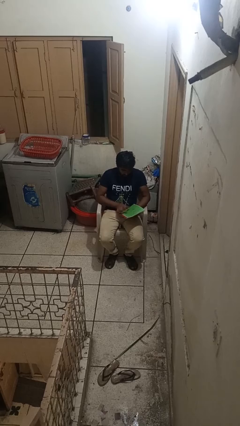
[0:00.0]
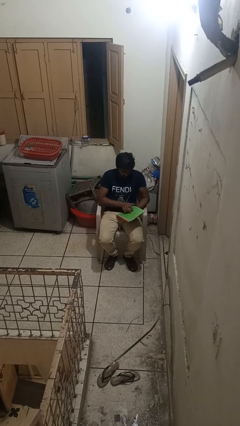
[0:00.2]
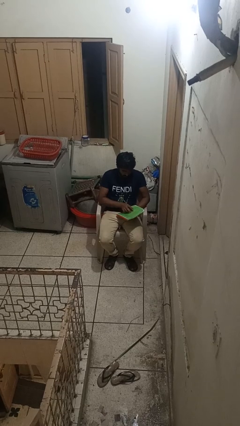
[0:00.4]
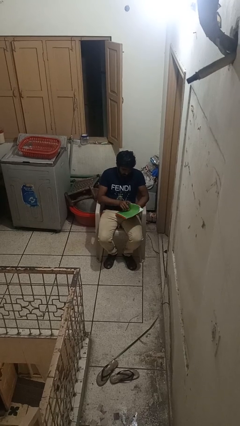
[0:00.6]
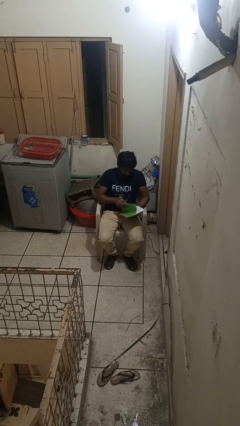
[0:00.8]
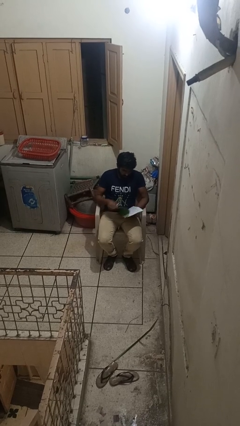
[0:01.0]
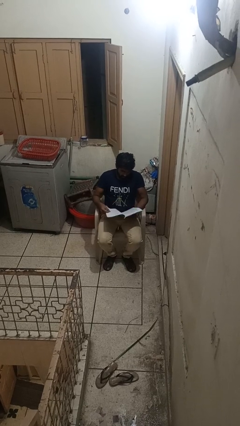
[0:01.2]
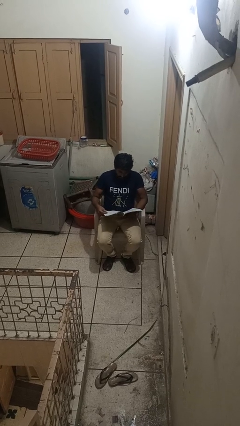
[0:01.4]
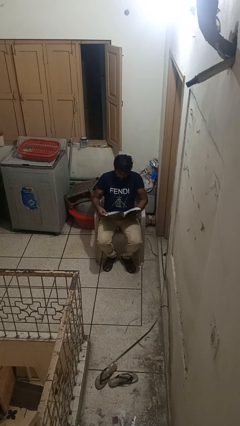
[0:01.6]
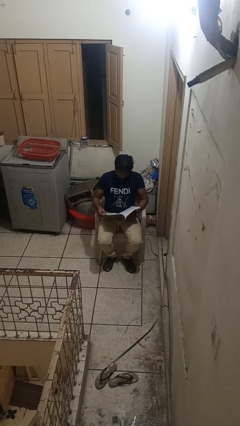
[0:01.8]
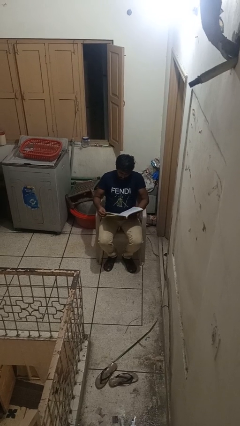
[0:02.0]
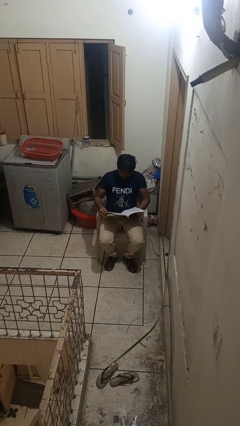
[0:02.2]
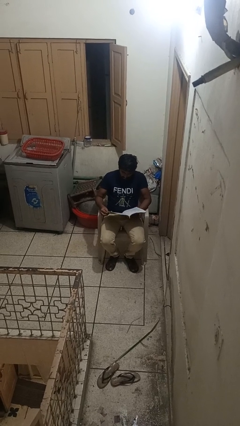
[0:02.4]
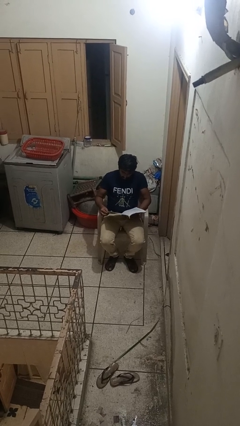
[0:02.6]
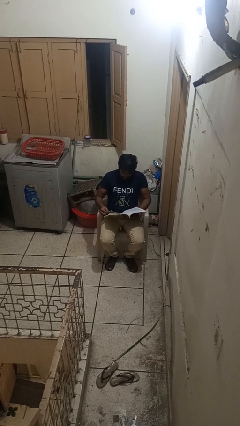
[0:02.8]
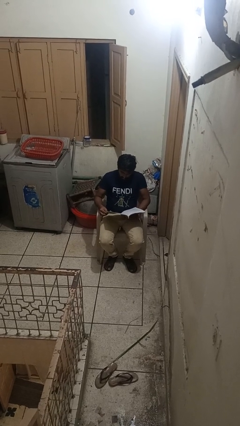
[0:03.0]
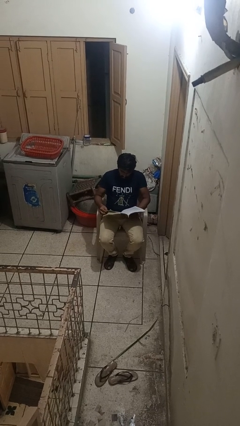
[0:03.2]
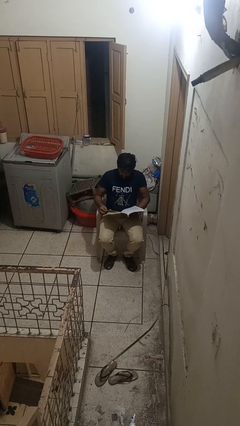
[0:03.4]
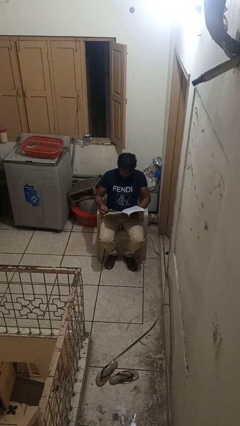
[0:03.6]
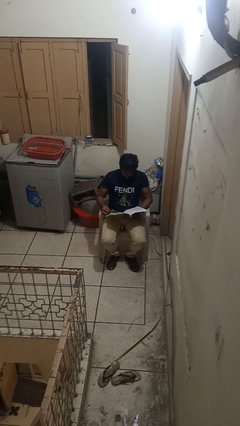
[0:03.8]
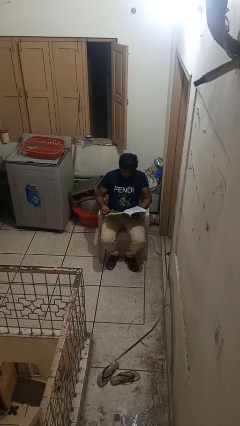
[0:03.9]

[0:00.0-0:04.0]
person reads magazine

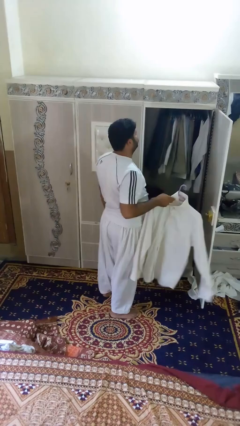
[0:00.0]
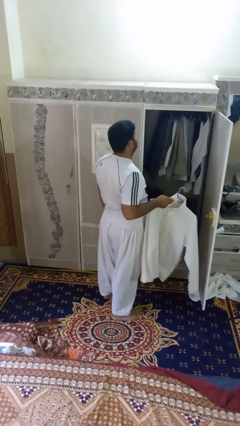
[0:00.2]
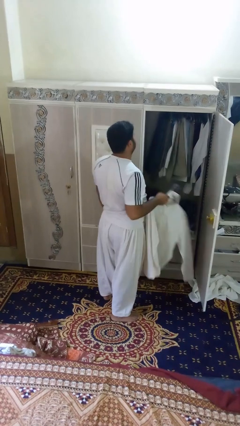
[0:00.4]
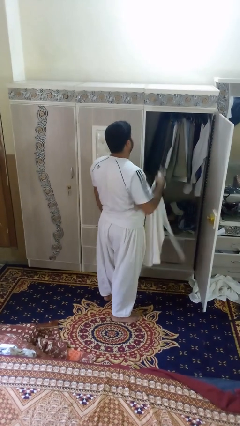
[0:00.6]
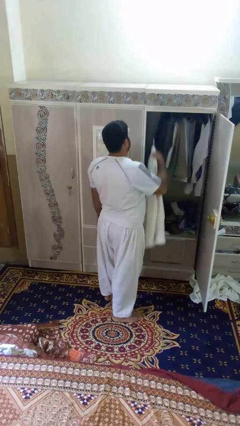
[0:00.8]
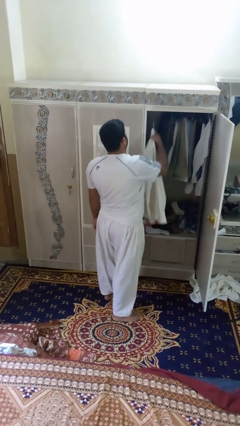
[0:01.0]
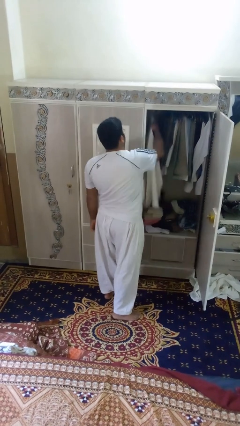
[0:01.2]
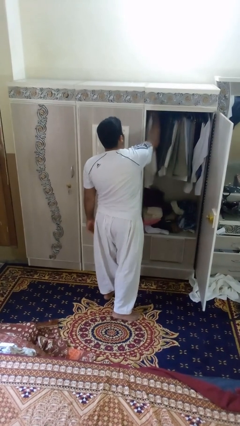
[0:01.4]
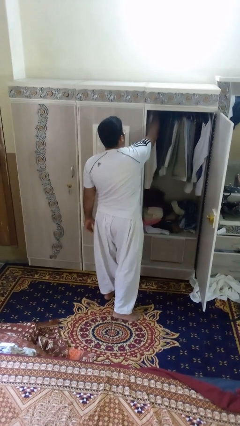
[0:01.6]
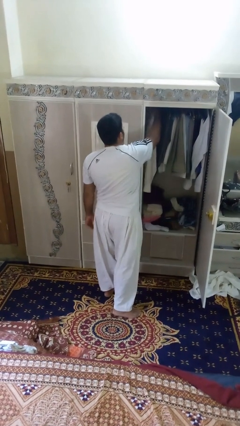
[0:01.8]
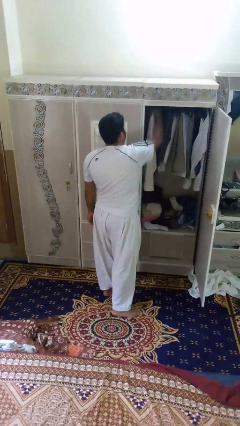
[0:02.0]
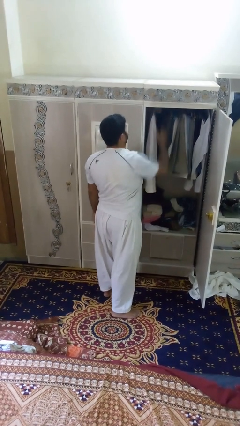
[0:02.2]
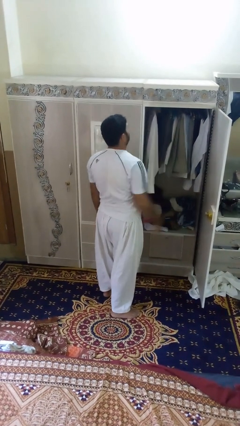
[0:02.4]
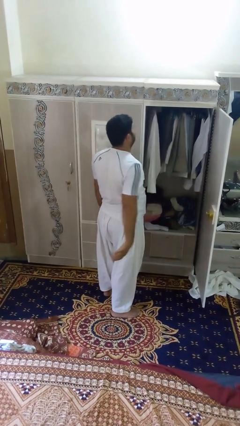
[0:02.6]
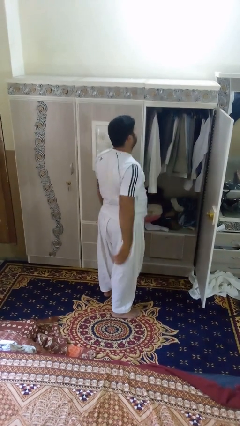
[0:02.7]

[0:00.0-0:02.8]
person puts clothes into closet

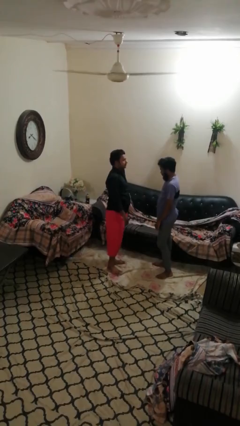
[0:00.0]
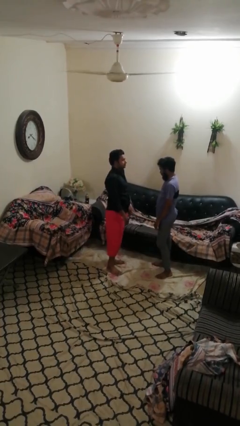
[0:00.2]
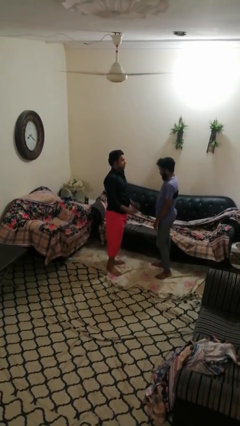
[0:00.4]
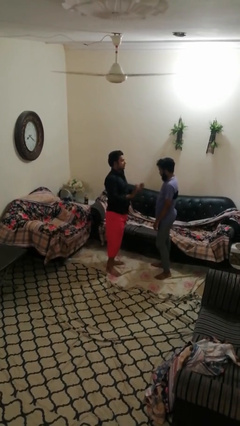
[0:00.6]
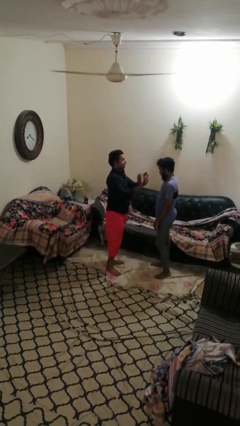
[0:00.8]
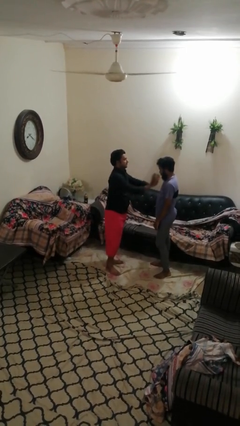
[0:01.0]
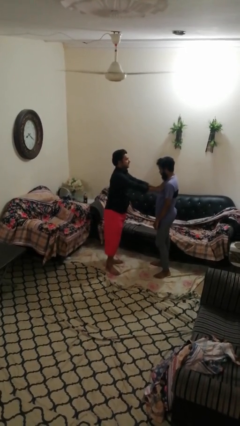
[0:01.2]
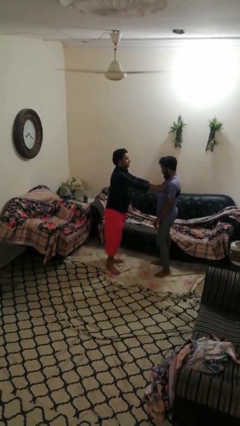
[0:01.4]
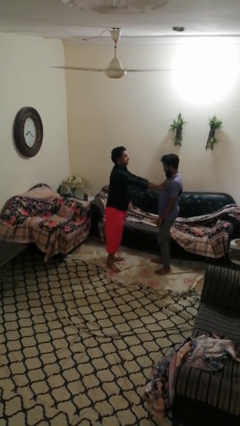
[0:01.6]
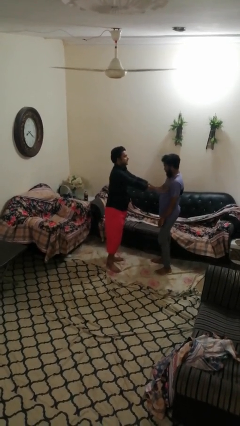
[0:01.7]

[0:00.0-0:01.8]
person shoves person

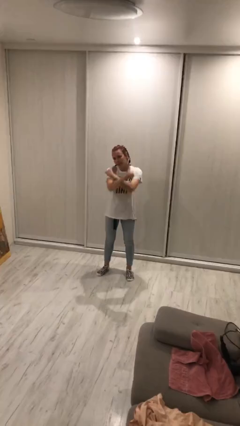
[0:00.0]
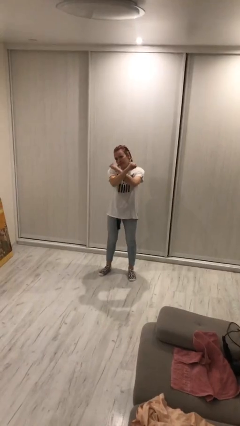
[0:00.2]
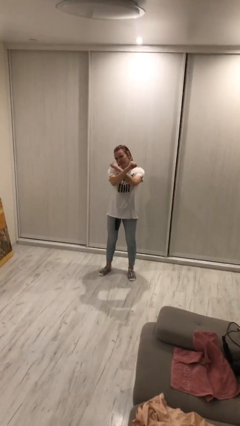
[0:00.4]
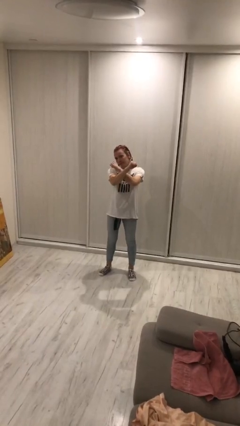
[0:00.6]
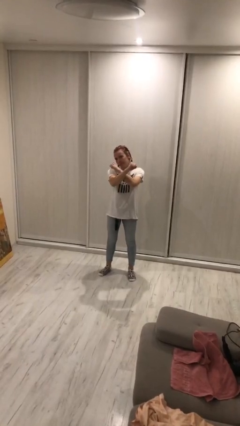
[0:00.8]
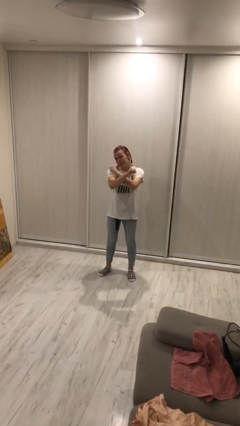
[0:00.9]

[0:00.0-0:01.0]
person gestures arms x

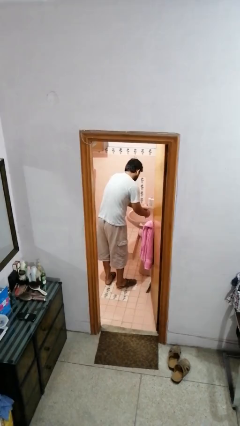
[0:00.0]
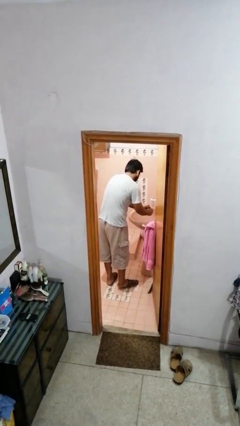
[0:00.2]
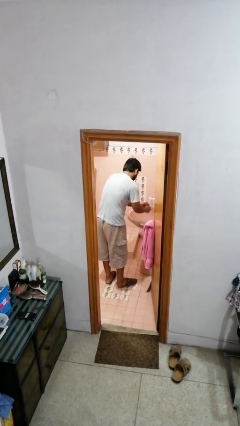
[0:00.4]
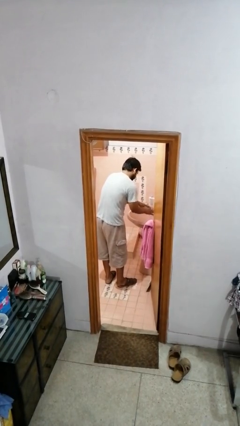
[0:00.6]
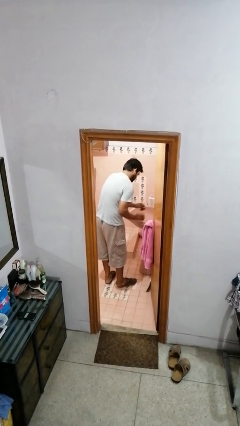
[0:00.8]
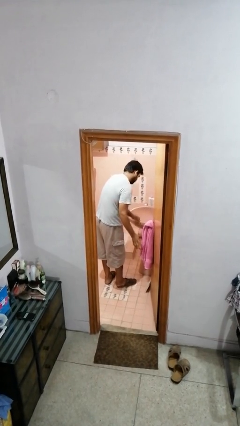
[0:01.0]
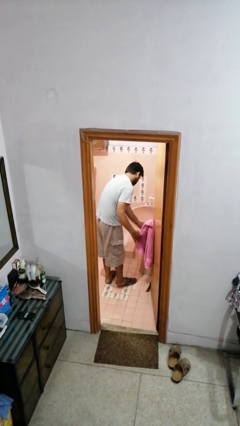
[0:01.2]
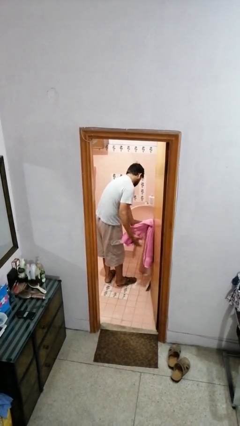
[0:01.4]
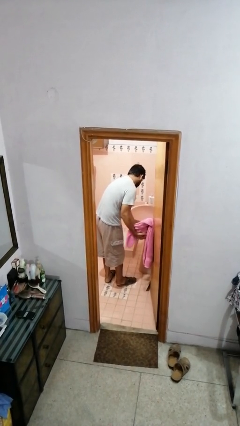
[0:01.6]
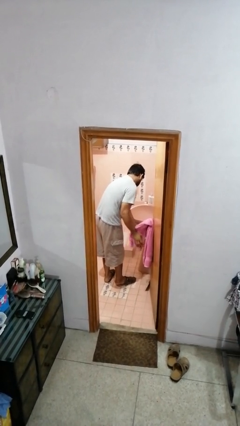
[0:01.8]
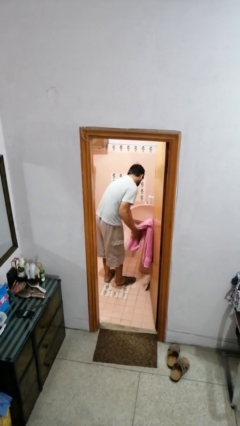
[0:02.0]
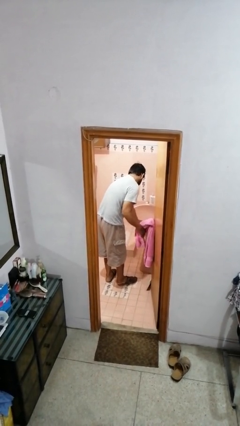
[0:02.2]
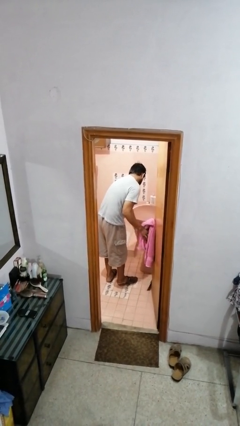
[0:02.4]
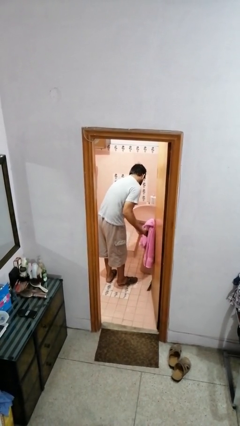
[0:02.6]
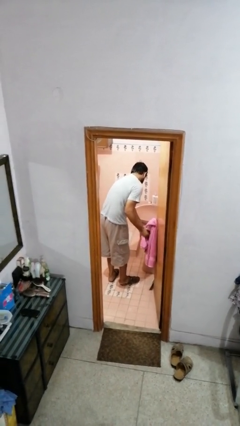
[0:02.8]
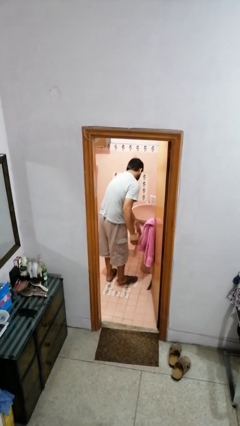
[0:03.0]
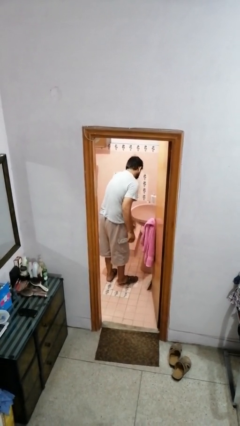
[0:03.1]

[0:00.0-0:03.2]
person dries hands with towel

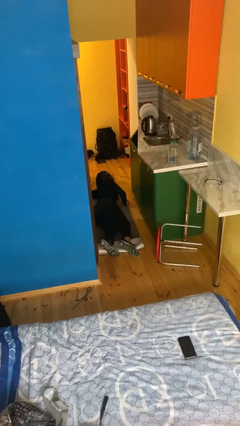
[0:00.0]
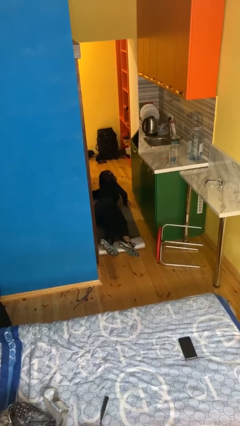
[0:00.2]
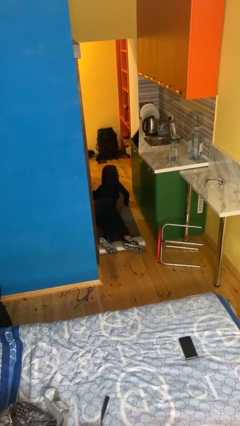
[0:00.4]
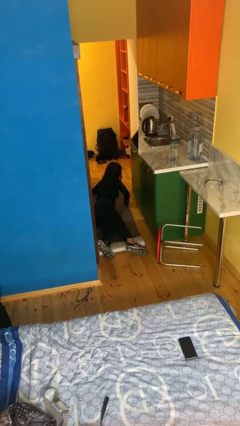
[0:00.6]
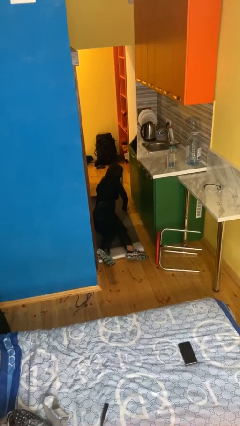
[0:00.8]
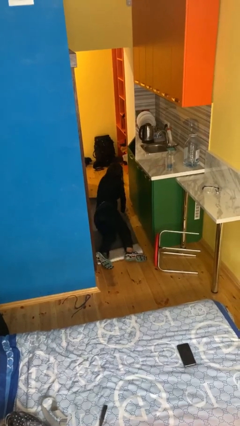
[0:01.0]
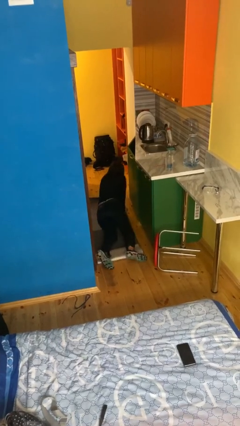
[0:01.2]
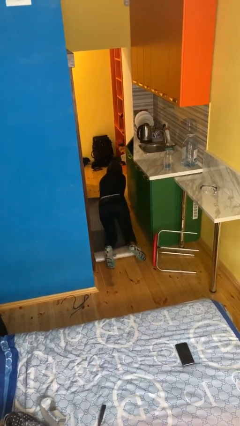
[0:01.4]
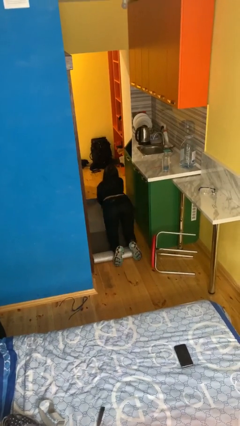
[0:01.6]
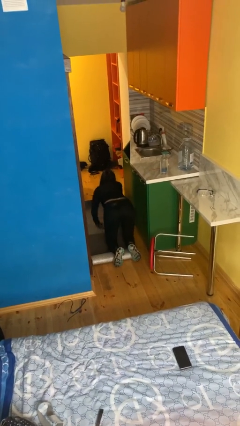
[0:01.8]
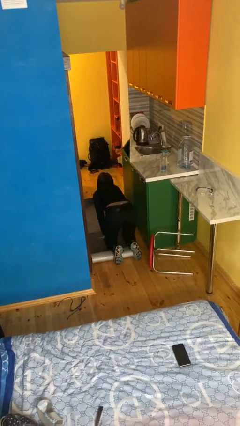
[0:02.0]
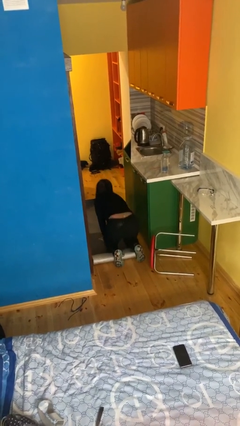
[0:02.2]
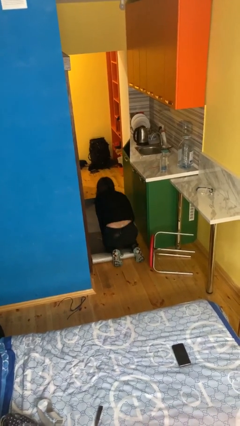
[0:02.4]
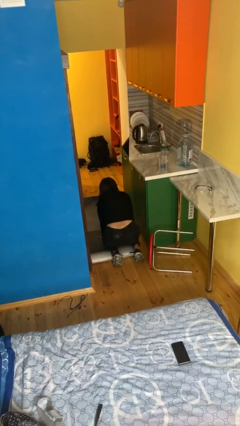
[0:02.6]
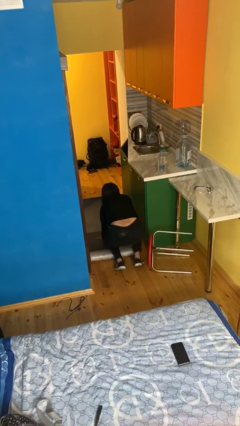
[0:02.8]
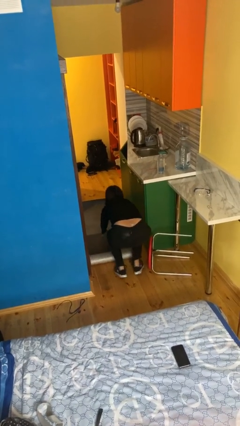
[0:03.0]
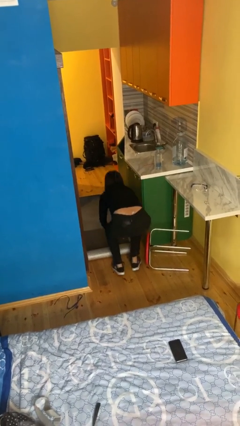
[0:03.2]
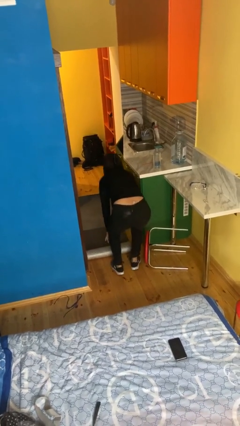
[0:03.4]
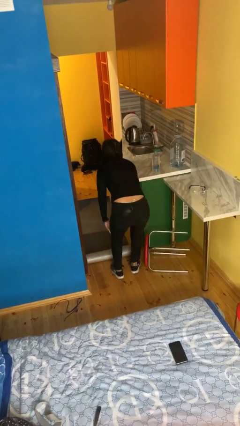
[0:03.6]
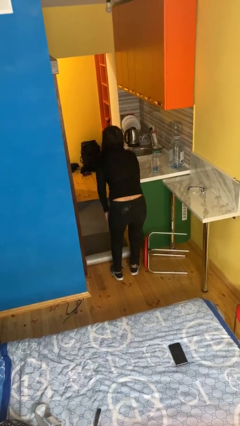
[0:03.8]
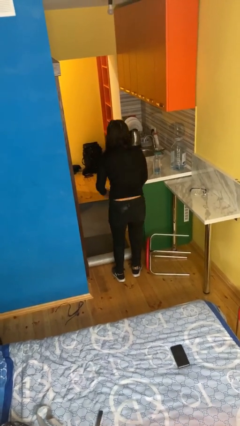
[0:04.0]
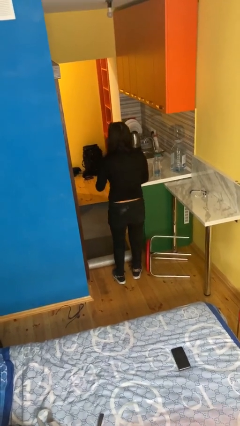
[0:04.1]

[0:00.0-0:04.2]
person stands up from floor

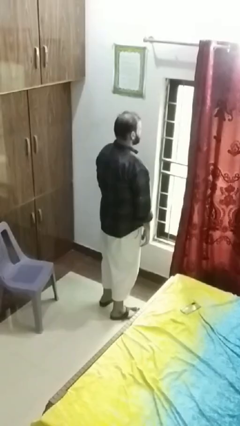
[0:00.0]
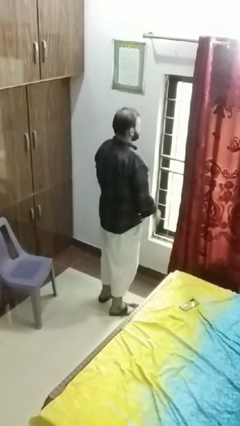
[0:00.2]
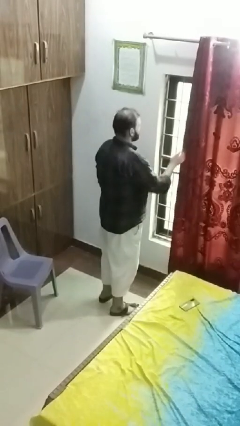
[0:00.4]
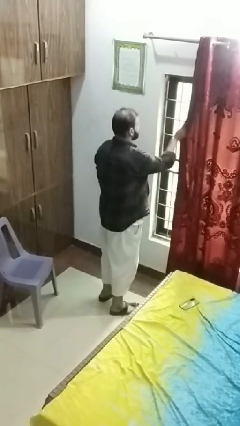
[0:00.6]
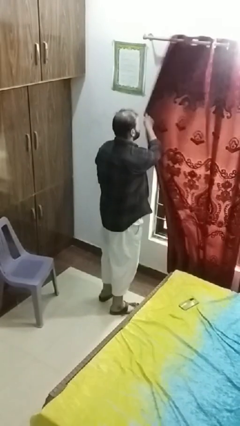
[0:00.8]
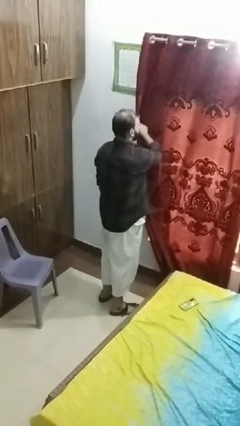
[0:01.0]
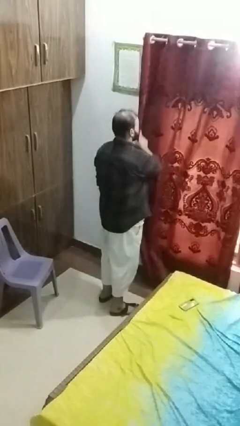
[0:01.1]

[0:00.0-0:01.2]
person closes curtains
